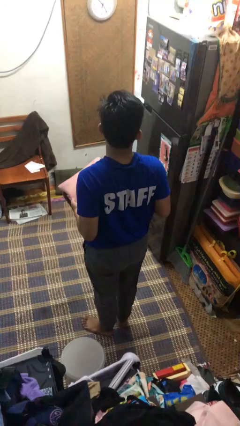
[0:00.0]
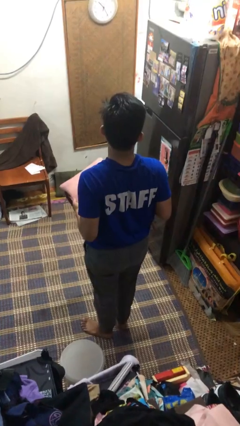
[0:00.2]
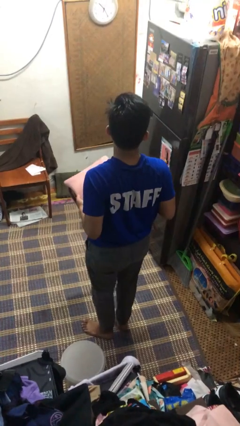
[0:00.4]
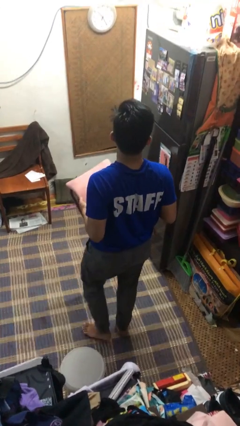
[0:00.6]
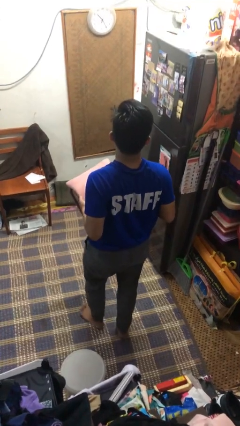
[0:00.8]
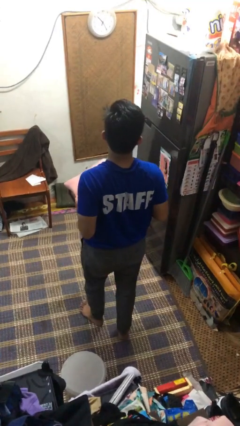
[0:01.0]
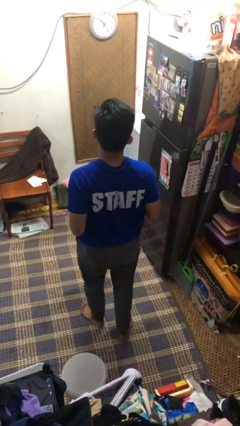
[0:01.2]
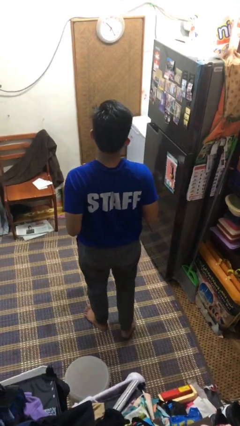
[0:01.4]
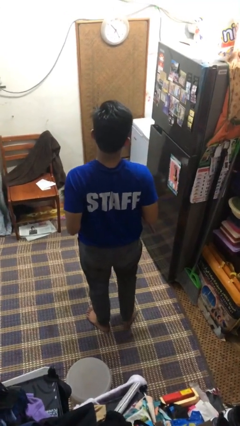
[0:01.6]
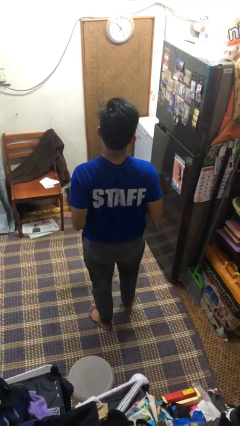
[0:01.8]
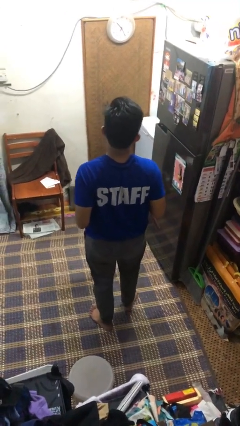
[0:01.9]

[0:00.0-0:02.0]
person carries furniture

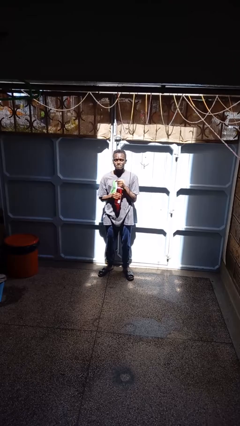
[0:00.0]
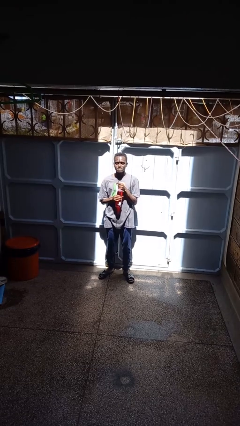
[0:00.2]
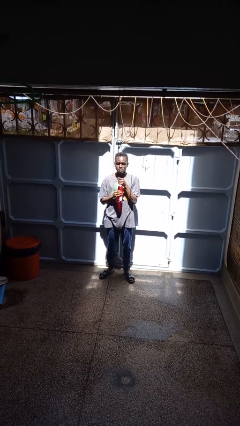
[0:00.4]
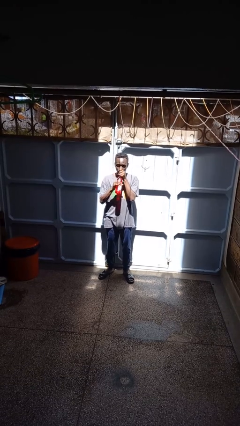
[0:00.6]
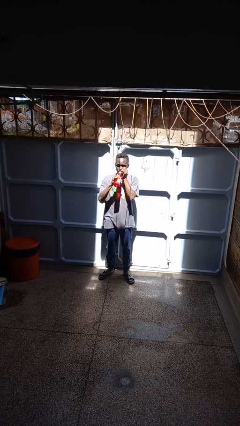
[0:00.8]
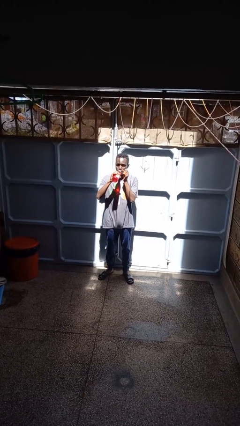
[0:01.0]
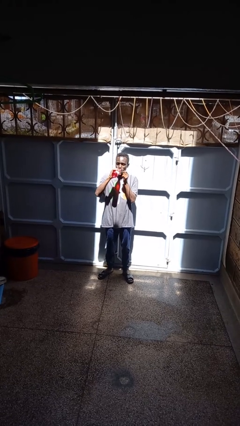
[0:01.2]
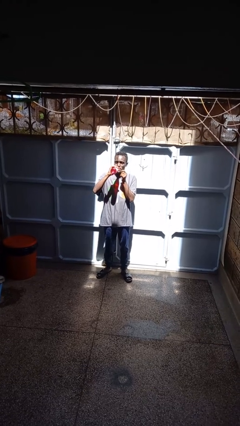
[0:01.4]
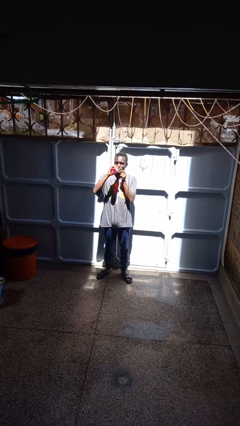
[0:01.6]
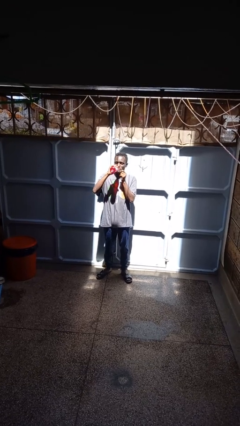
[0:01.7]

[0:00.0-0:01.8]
person drinks from beverage can

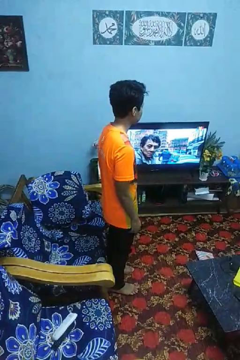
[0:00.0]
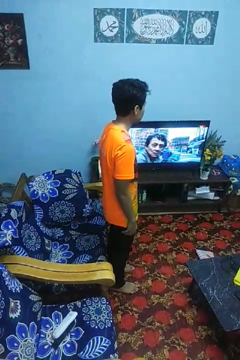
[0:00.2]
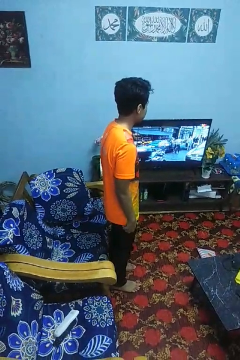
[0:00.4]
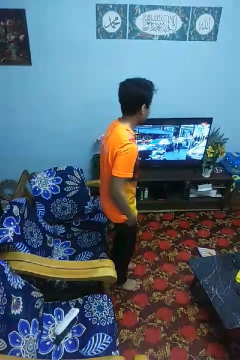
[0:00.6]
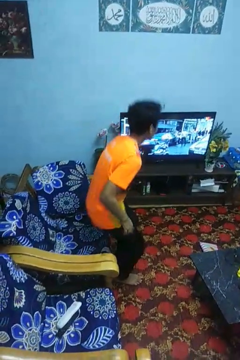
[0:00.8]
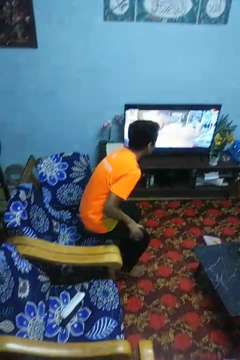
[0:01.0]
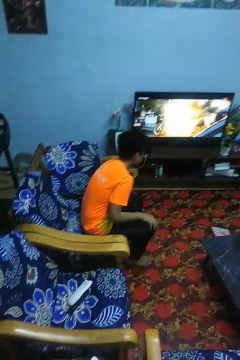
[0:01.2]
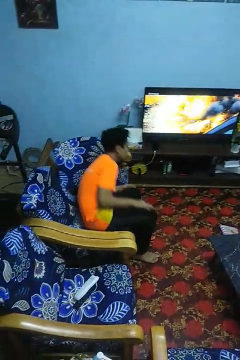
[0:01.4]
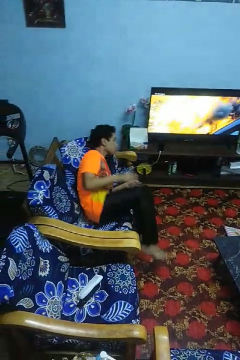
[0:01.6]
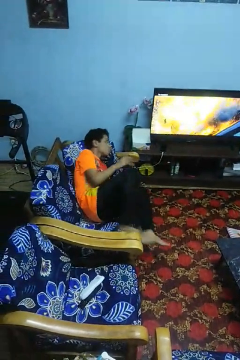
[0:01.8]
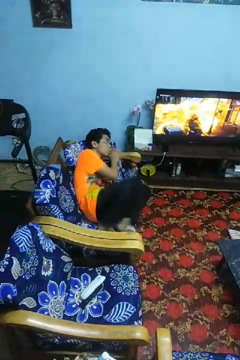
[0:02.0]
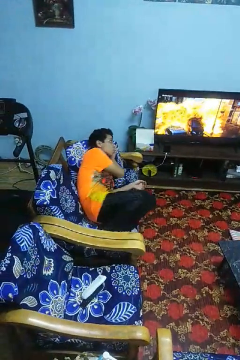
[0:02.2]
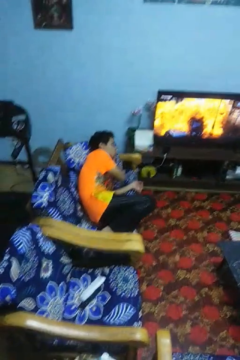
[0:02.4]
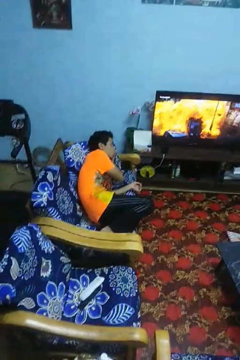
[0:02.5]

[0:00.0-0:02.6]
person lies down on couch

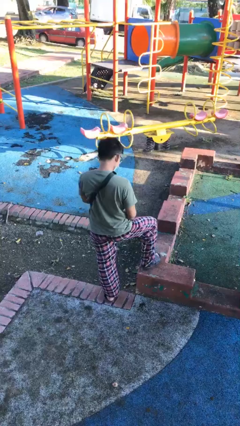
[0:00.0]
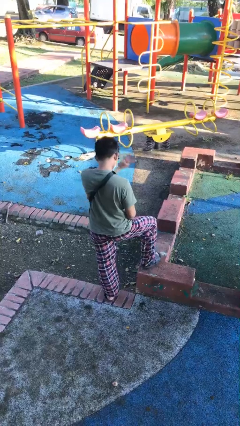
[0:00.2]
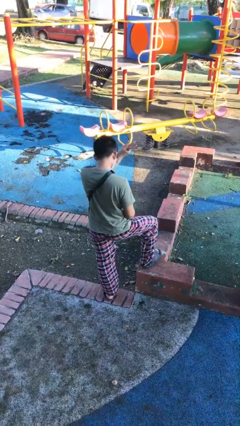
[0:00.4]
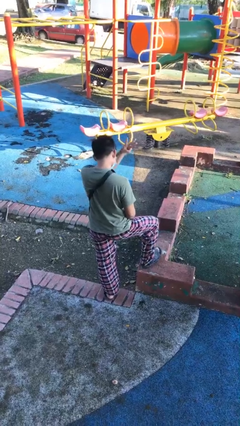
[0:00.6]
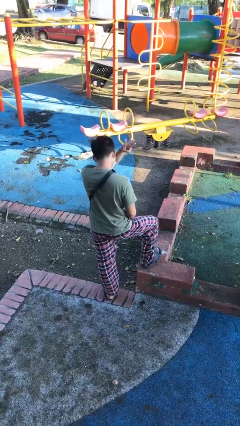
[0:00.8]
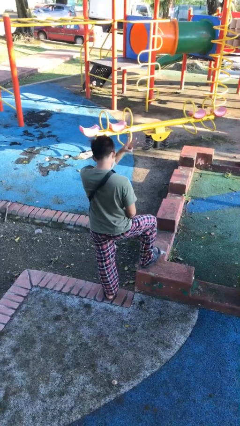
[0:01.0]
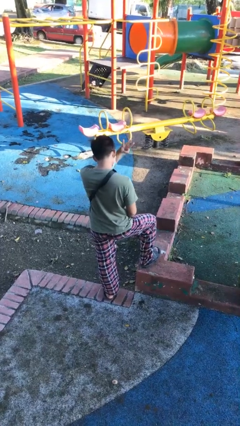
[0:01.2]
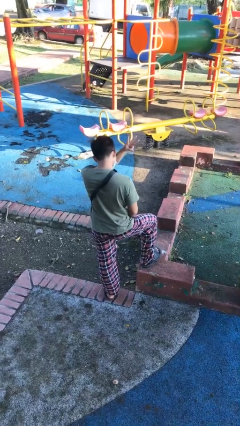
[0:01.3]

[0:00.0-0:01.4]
person gestures number three

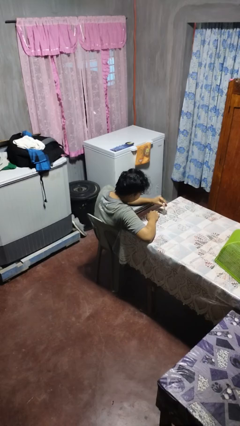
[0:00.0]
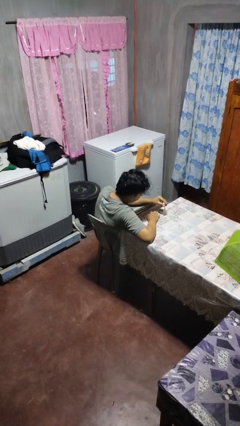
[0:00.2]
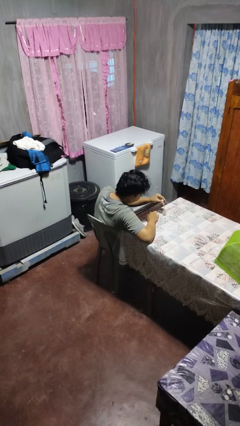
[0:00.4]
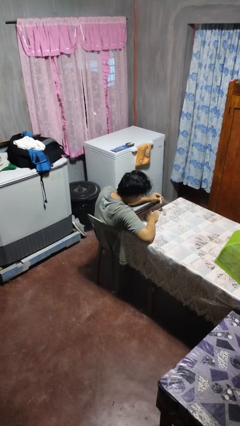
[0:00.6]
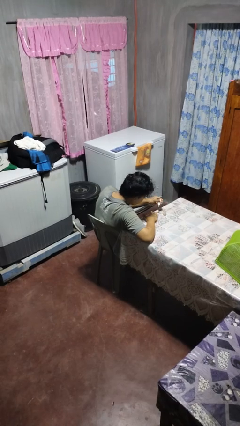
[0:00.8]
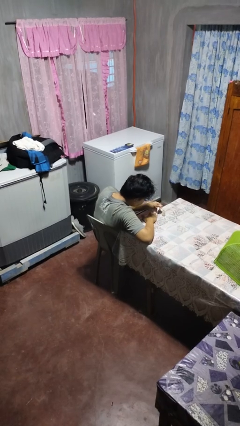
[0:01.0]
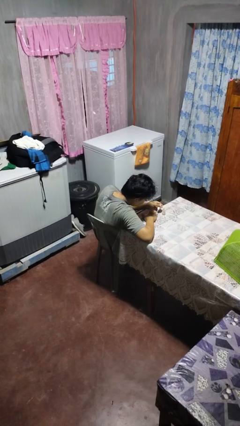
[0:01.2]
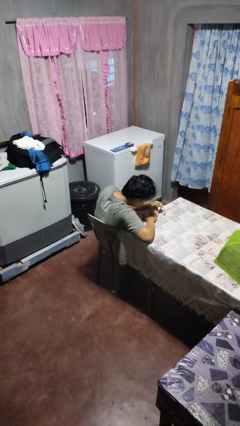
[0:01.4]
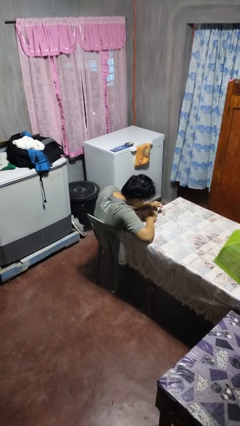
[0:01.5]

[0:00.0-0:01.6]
person paints fingernails

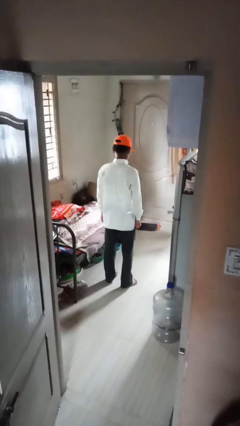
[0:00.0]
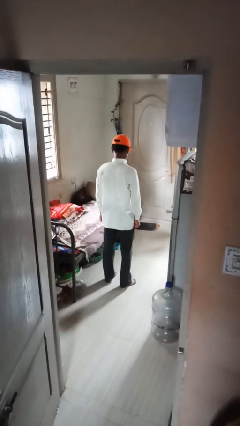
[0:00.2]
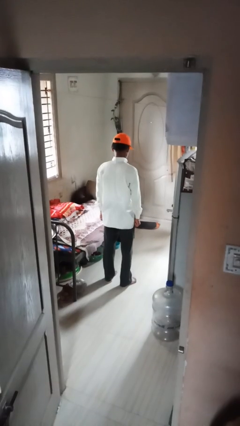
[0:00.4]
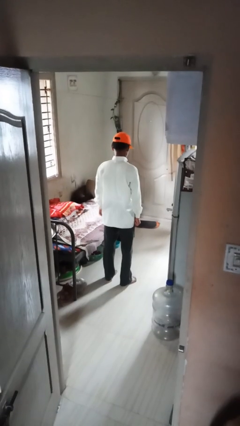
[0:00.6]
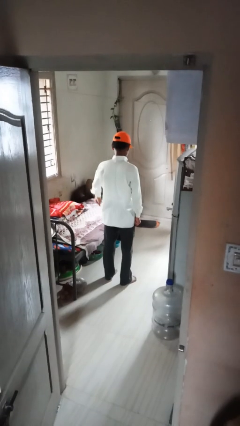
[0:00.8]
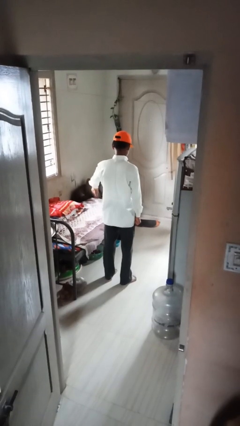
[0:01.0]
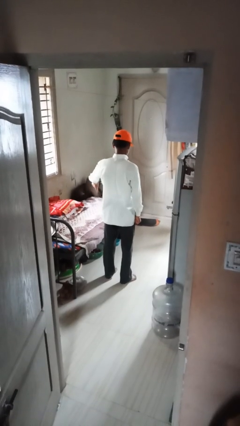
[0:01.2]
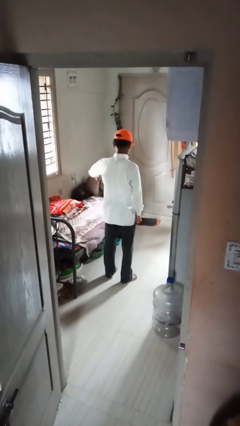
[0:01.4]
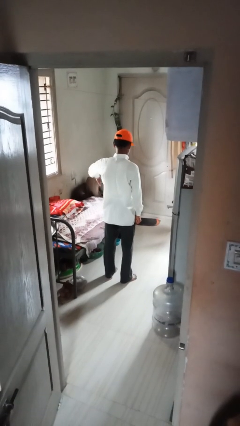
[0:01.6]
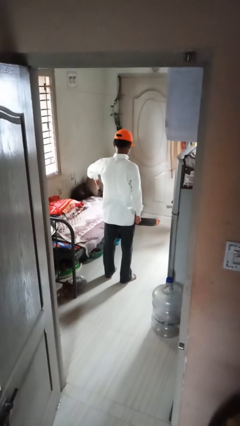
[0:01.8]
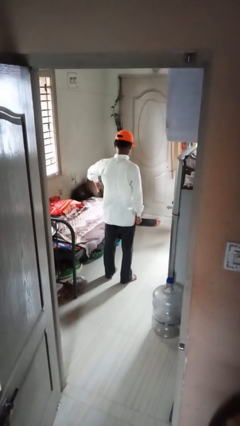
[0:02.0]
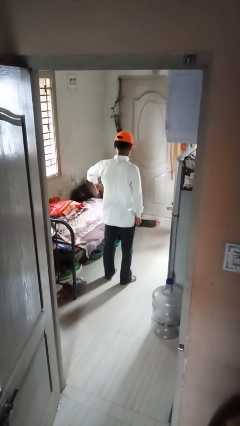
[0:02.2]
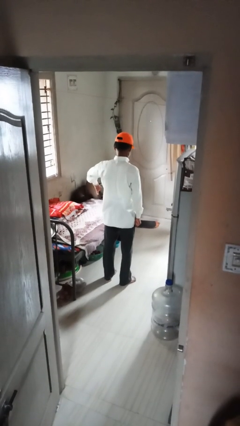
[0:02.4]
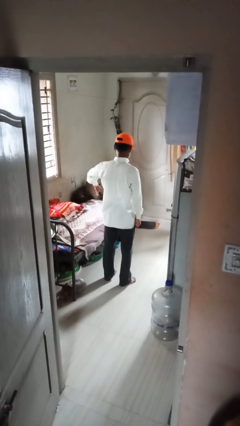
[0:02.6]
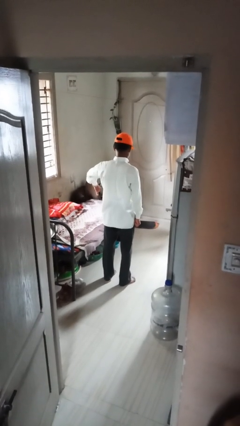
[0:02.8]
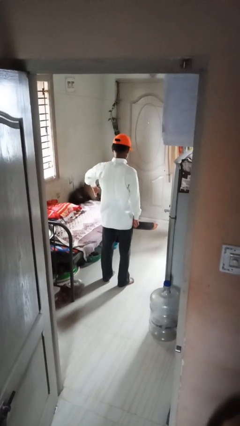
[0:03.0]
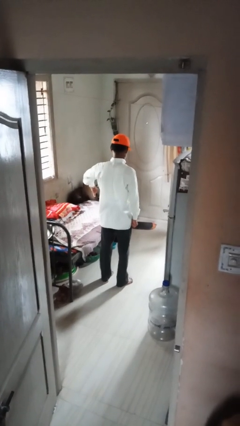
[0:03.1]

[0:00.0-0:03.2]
person gestures thumbs down

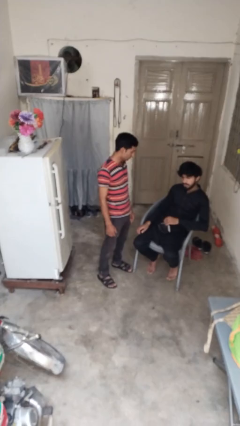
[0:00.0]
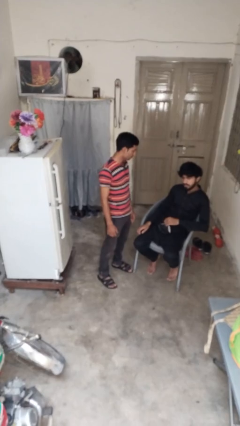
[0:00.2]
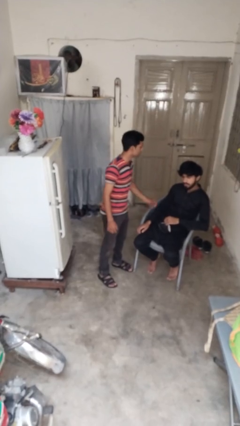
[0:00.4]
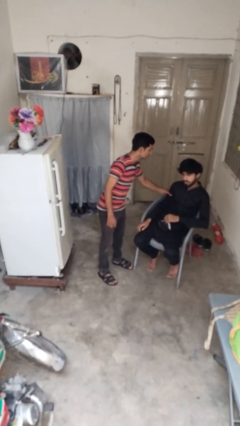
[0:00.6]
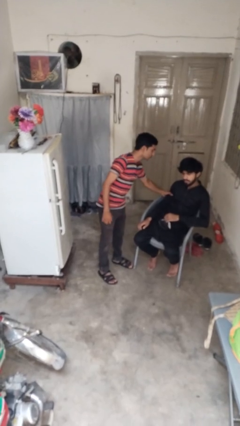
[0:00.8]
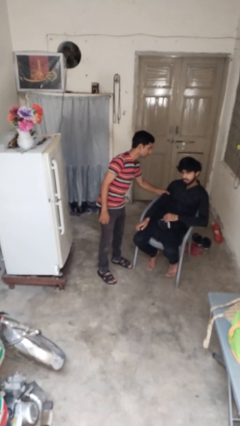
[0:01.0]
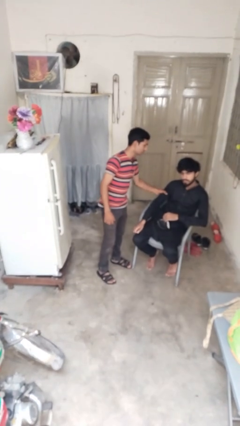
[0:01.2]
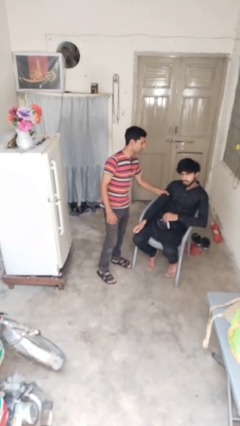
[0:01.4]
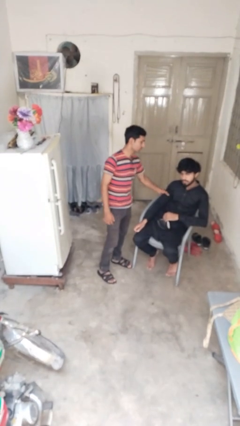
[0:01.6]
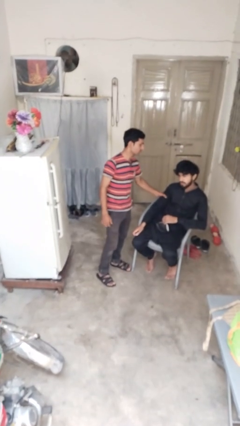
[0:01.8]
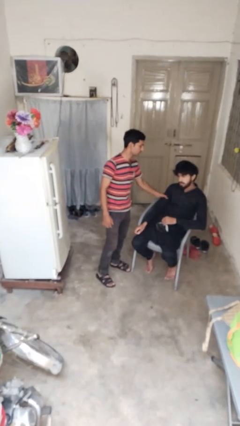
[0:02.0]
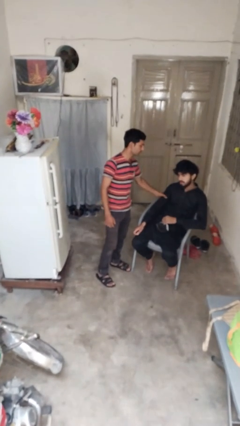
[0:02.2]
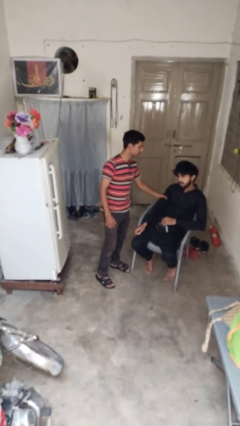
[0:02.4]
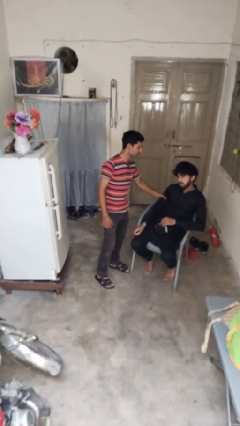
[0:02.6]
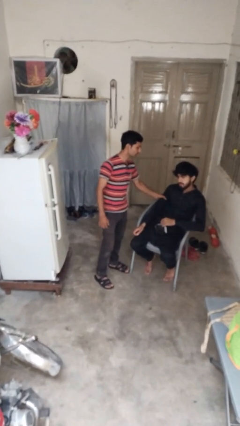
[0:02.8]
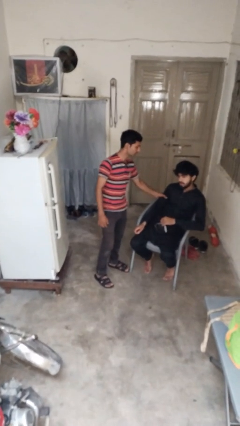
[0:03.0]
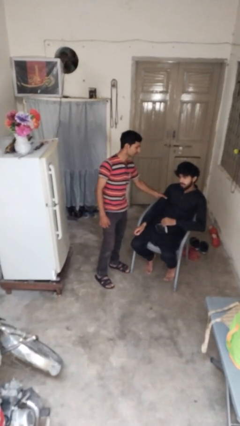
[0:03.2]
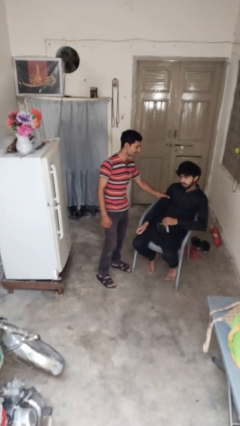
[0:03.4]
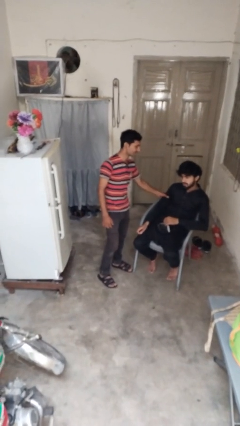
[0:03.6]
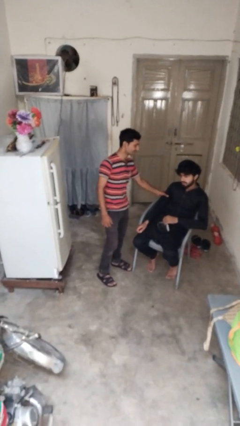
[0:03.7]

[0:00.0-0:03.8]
person grabs person by bicep

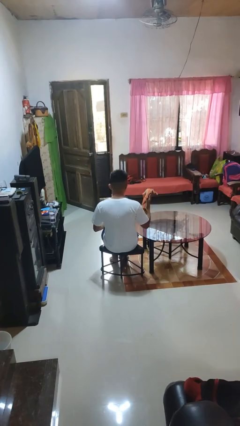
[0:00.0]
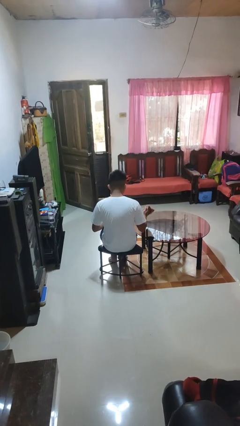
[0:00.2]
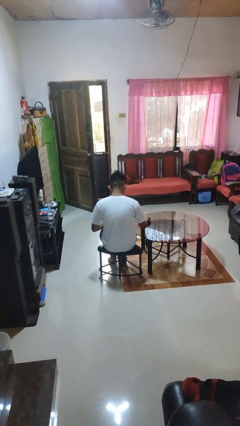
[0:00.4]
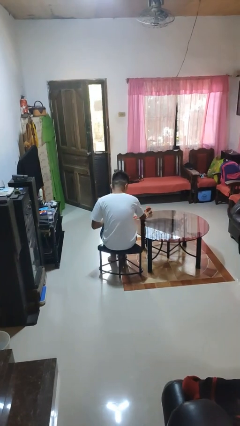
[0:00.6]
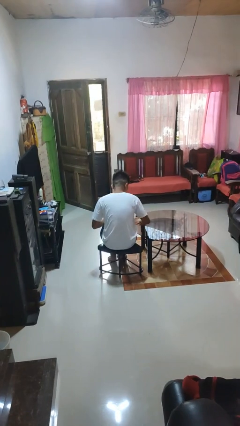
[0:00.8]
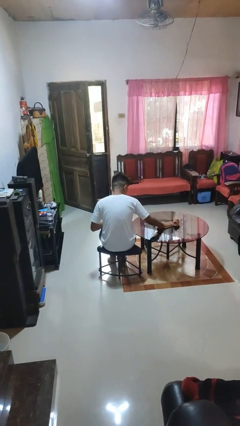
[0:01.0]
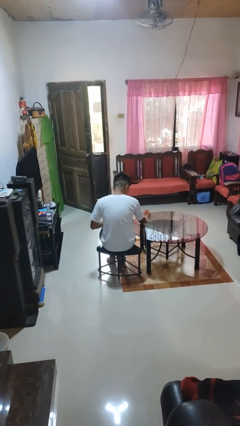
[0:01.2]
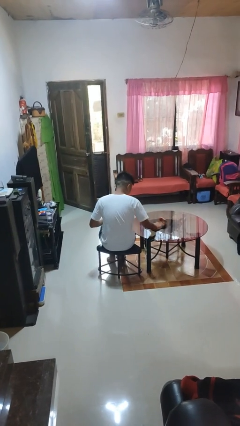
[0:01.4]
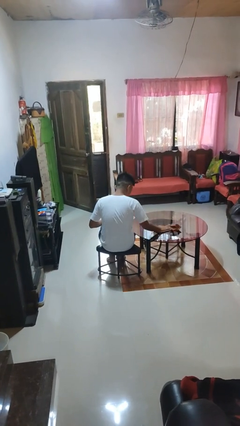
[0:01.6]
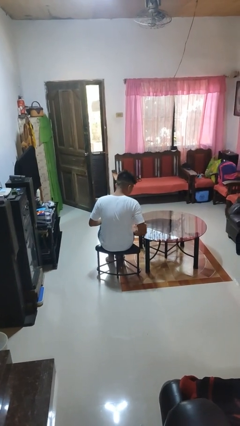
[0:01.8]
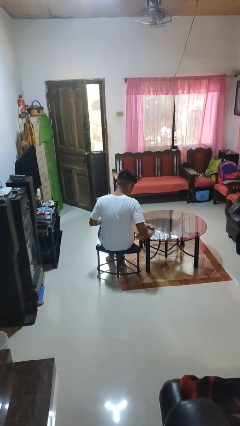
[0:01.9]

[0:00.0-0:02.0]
person cleans table with rag
